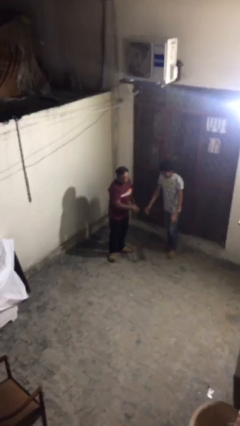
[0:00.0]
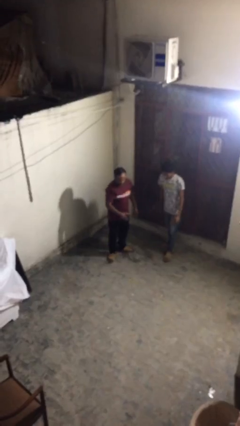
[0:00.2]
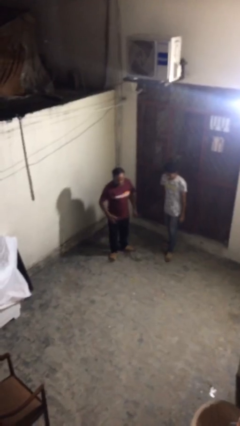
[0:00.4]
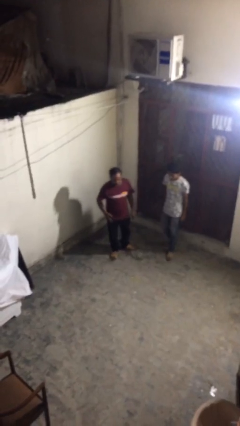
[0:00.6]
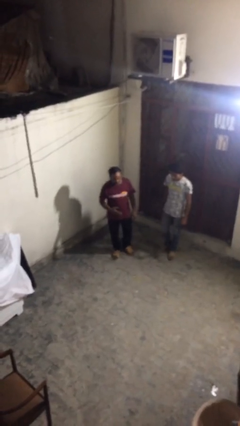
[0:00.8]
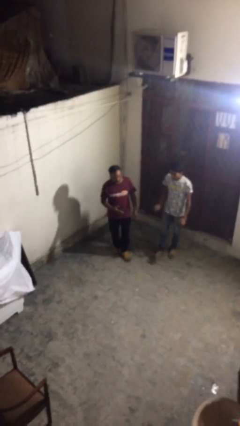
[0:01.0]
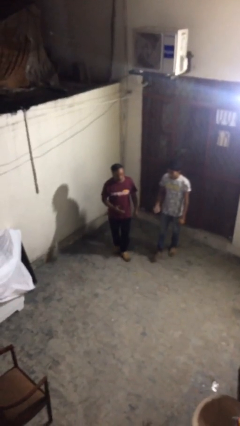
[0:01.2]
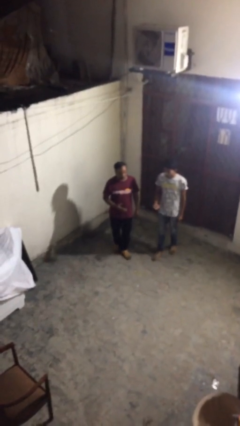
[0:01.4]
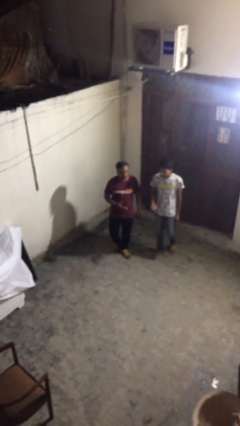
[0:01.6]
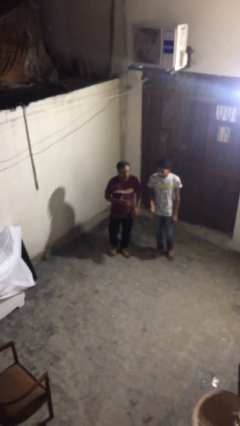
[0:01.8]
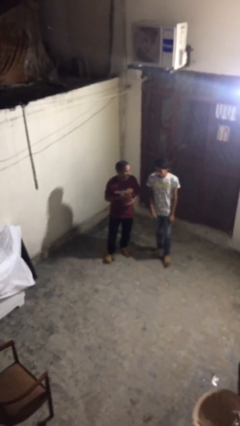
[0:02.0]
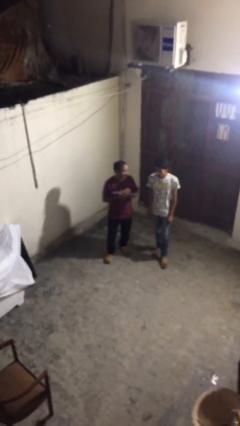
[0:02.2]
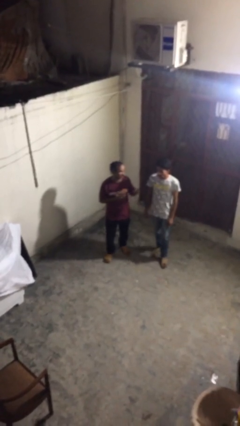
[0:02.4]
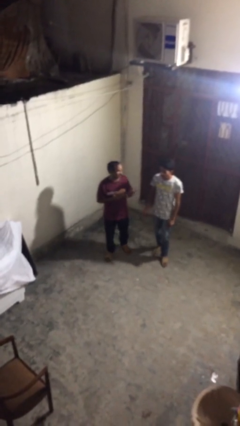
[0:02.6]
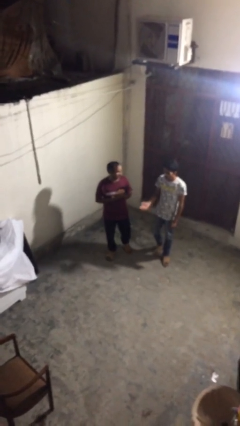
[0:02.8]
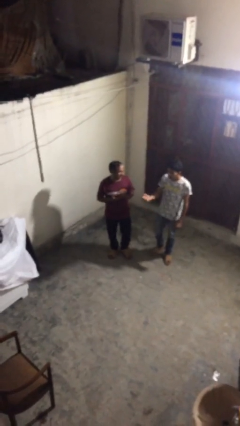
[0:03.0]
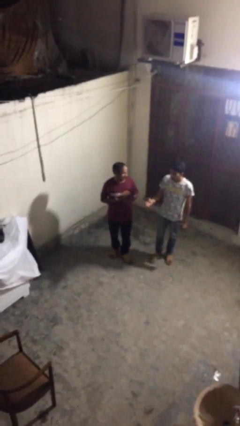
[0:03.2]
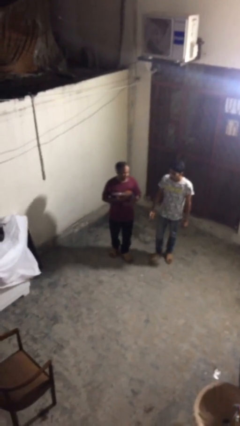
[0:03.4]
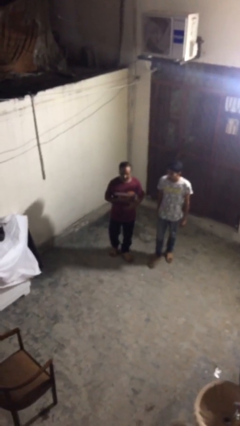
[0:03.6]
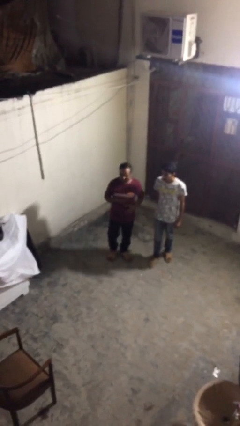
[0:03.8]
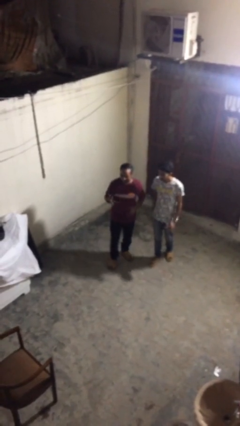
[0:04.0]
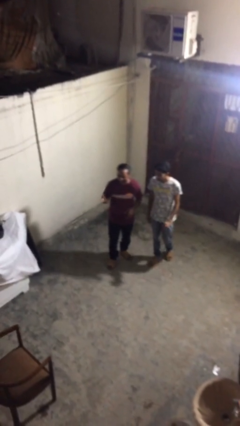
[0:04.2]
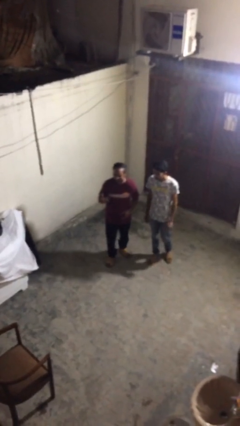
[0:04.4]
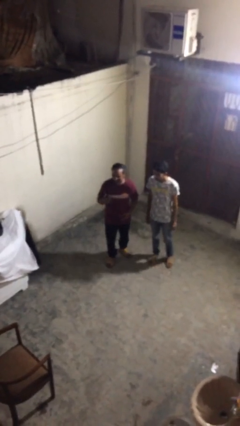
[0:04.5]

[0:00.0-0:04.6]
person talks to person

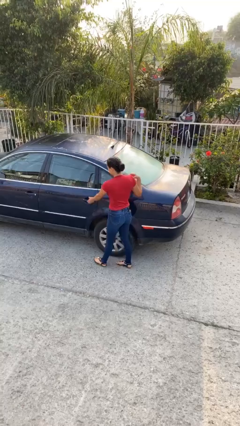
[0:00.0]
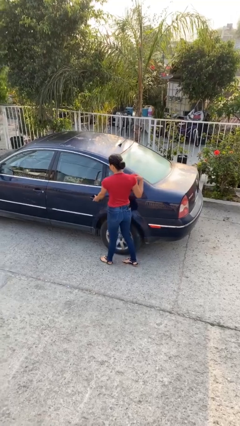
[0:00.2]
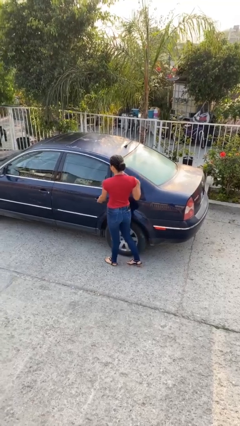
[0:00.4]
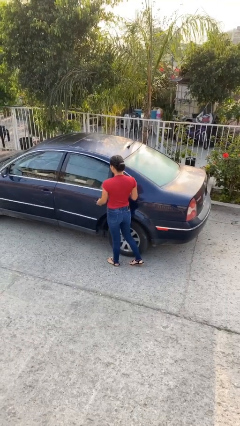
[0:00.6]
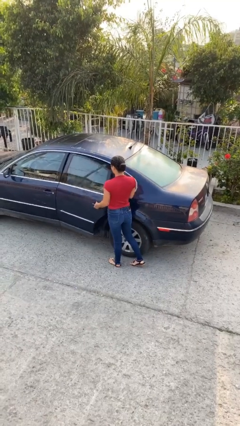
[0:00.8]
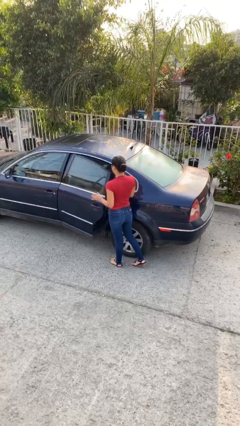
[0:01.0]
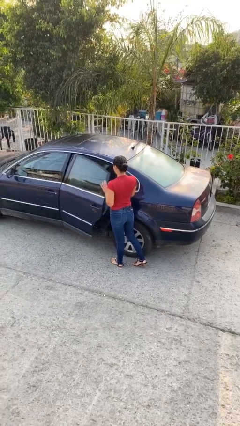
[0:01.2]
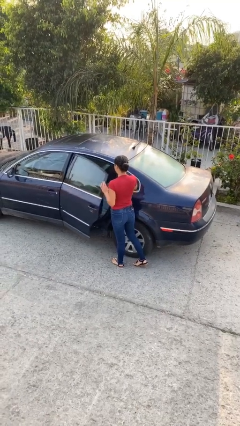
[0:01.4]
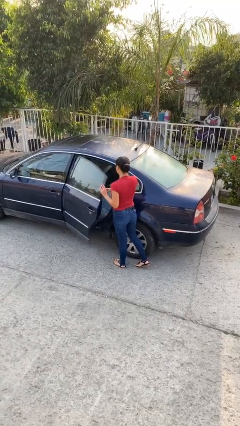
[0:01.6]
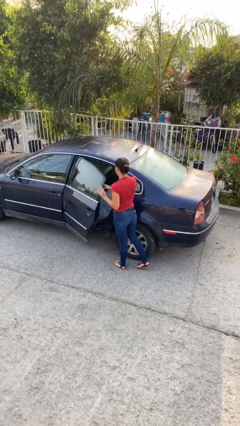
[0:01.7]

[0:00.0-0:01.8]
person opens car door

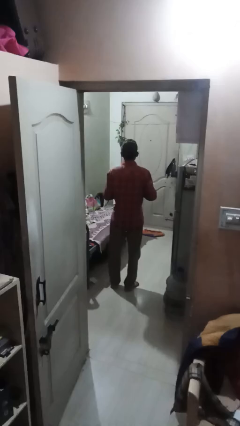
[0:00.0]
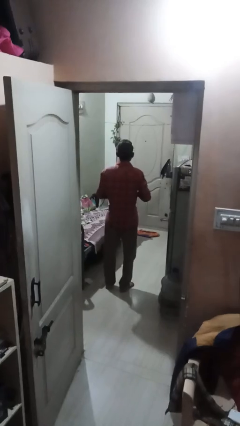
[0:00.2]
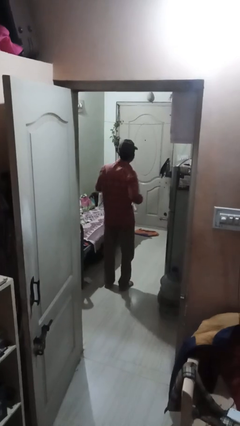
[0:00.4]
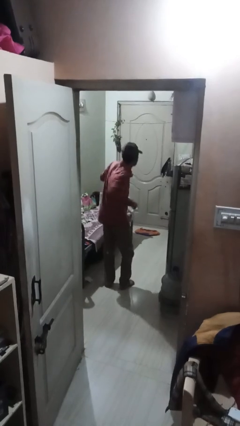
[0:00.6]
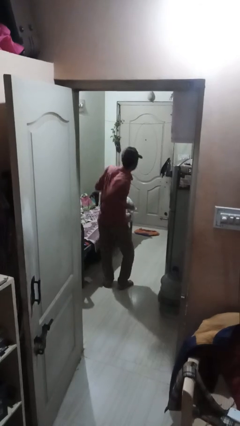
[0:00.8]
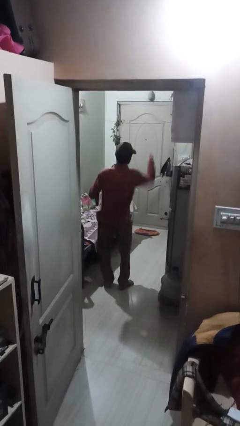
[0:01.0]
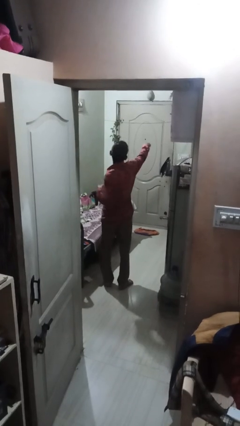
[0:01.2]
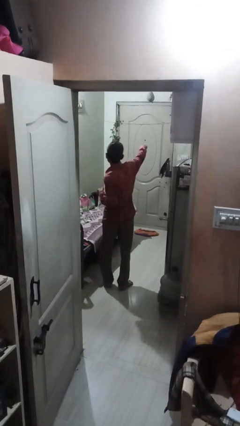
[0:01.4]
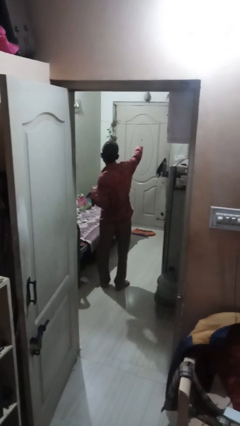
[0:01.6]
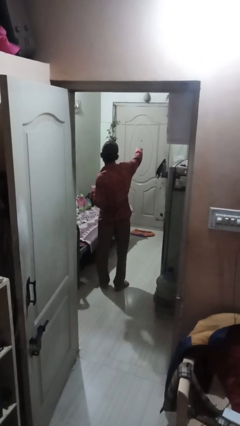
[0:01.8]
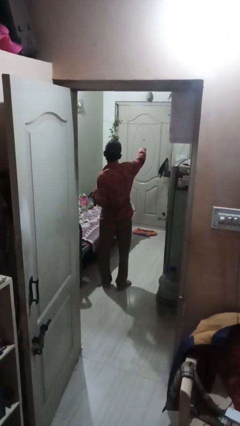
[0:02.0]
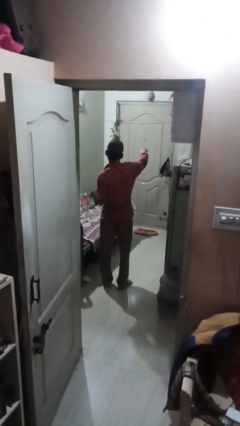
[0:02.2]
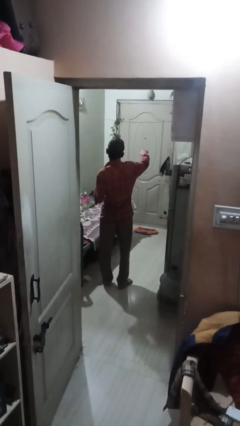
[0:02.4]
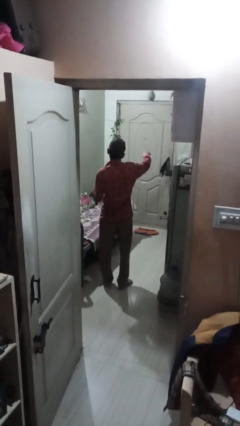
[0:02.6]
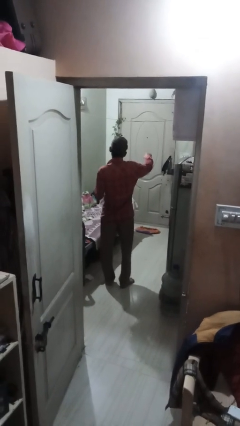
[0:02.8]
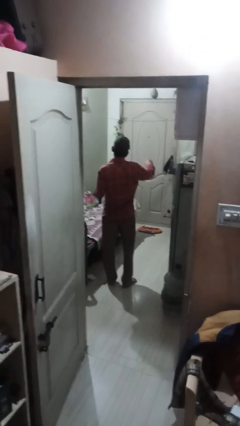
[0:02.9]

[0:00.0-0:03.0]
person punches

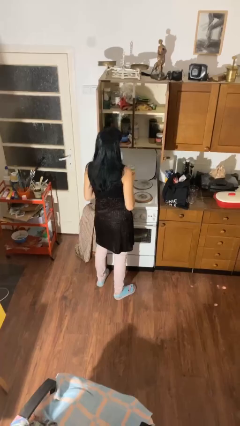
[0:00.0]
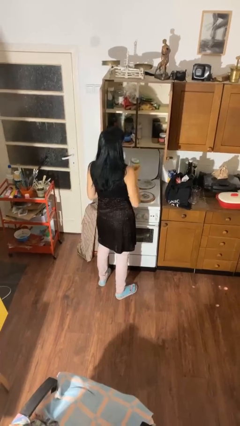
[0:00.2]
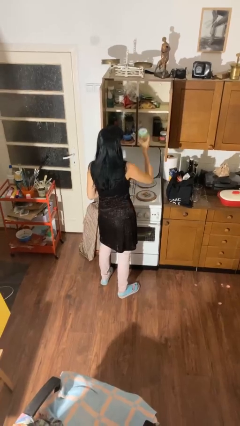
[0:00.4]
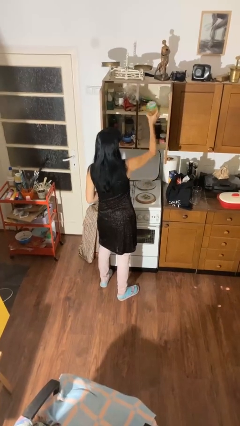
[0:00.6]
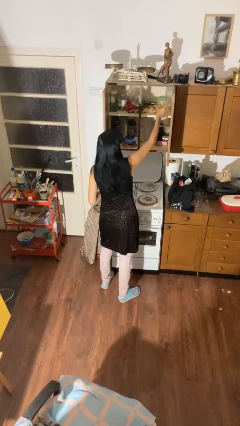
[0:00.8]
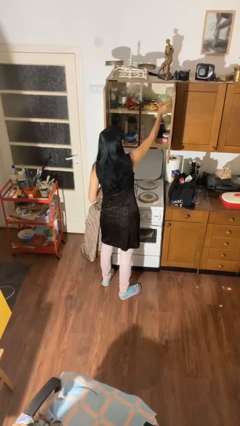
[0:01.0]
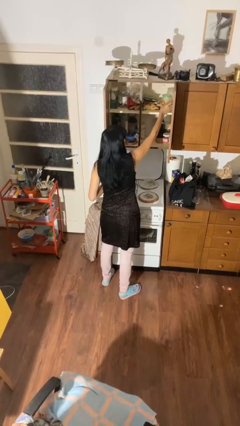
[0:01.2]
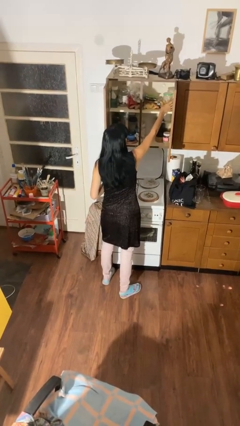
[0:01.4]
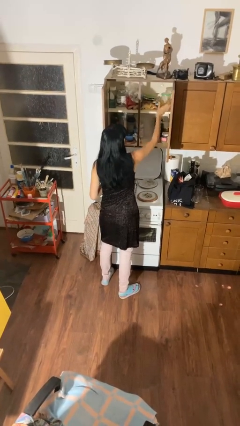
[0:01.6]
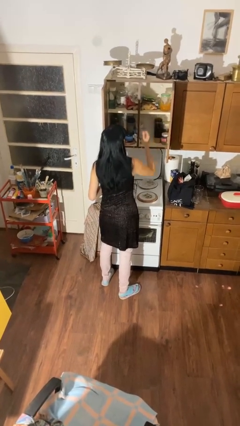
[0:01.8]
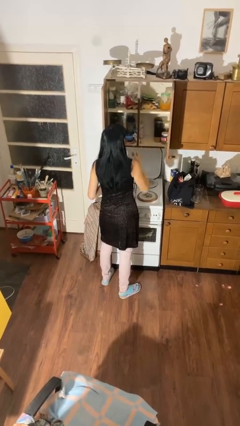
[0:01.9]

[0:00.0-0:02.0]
person puts down object into cabinet

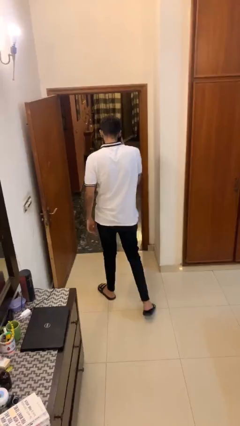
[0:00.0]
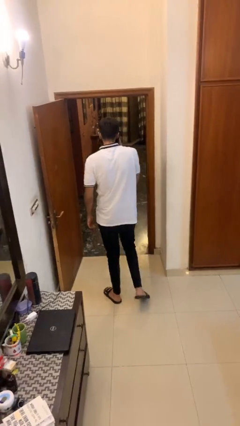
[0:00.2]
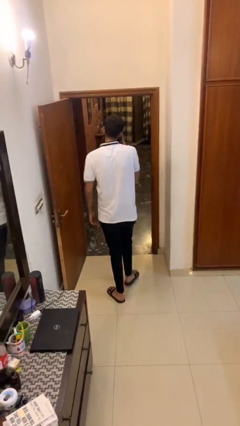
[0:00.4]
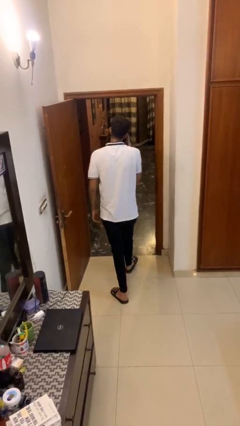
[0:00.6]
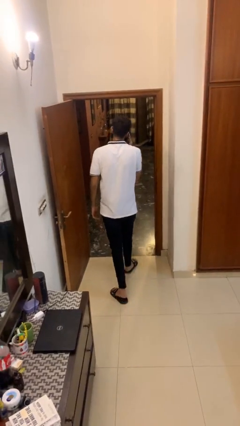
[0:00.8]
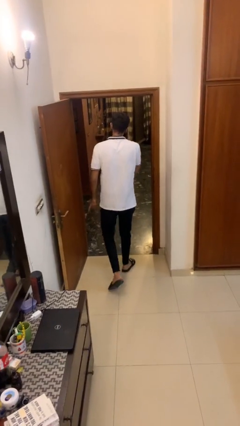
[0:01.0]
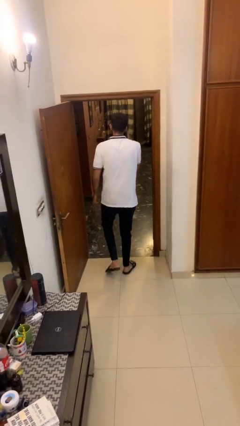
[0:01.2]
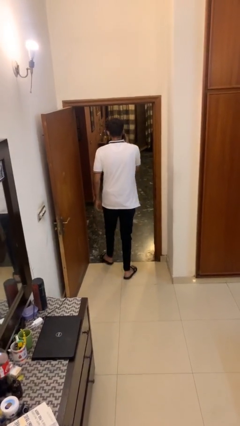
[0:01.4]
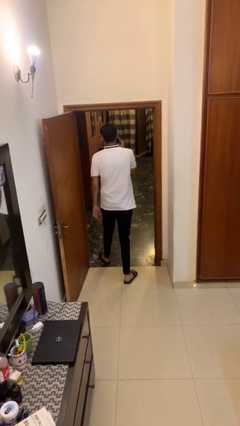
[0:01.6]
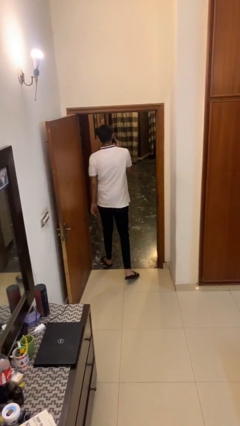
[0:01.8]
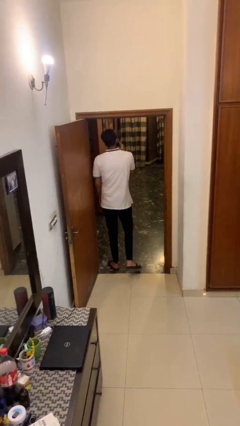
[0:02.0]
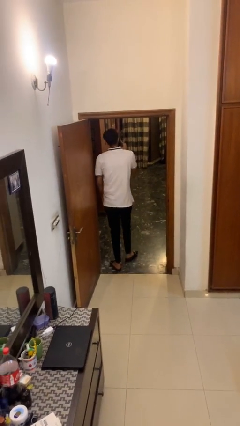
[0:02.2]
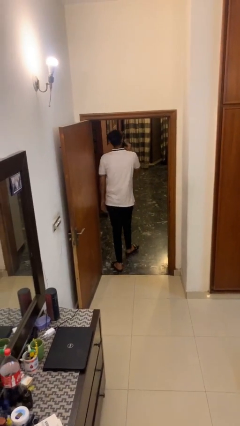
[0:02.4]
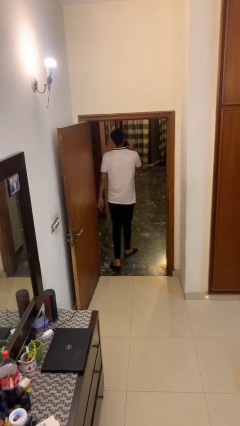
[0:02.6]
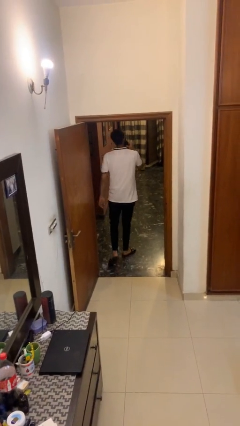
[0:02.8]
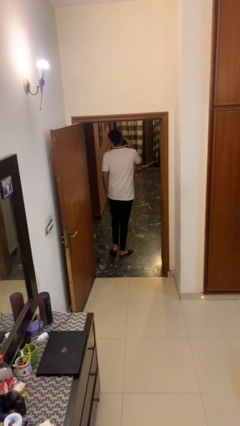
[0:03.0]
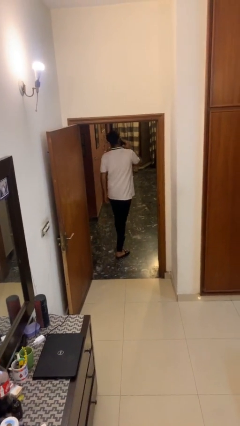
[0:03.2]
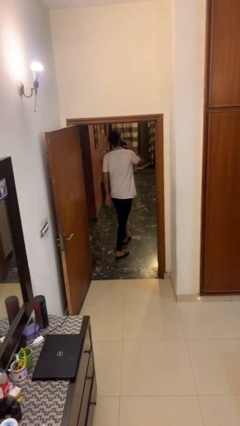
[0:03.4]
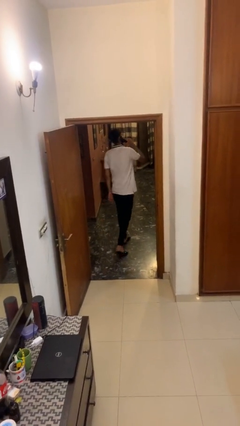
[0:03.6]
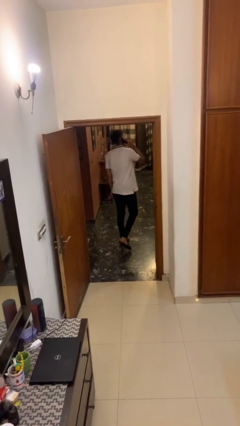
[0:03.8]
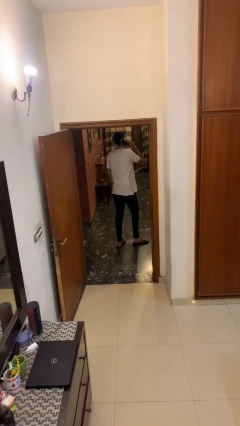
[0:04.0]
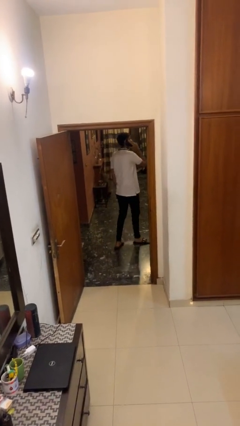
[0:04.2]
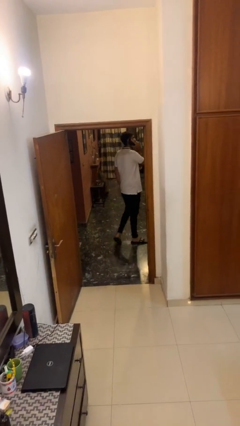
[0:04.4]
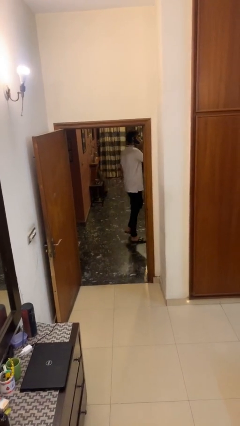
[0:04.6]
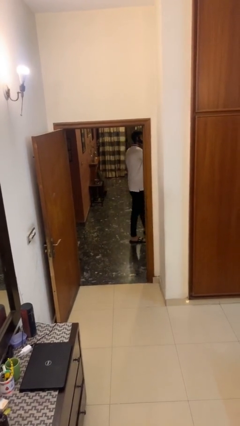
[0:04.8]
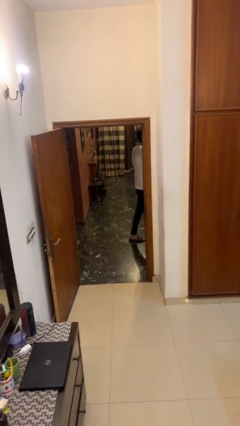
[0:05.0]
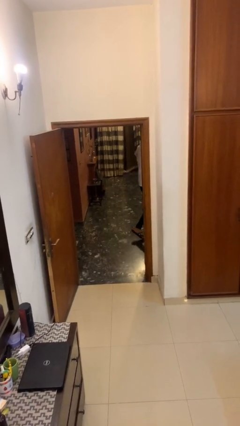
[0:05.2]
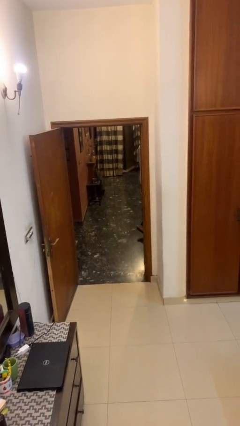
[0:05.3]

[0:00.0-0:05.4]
person exits scene through structure

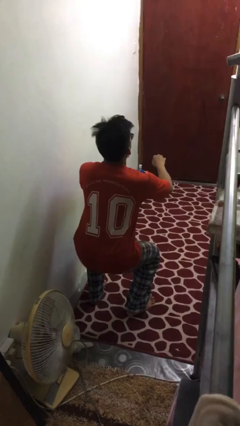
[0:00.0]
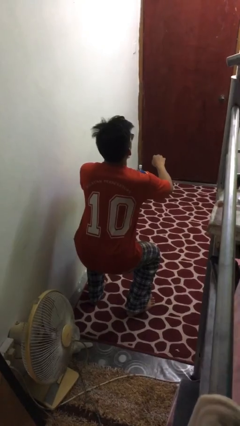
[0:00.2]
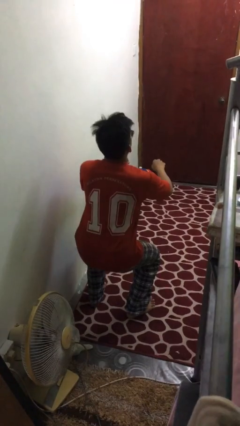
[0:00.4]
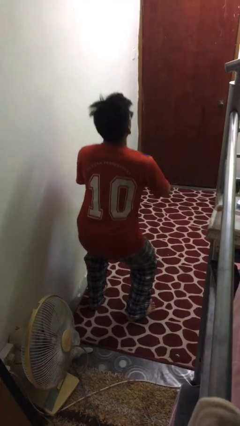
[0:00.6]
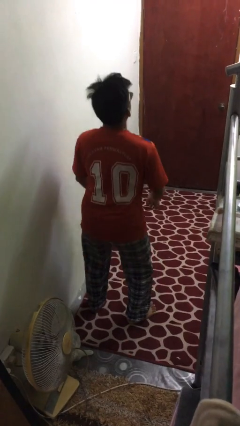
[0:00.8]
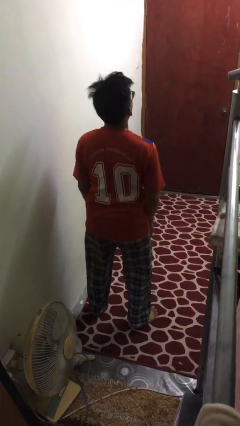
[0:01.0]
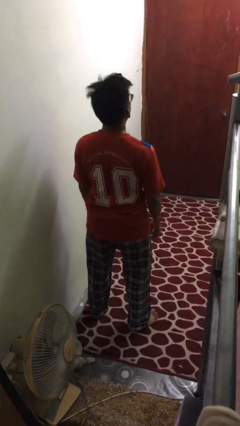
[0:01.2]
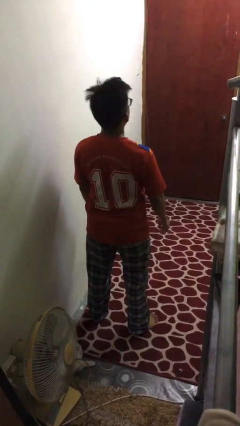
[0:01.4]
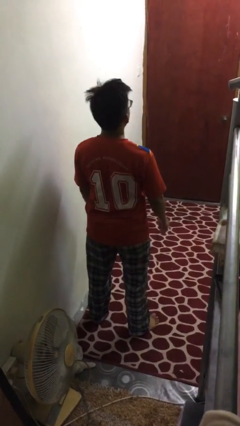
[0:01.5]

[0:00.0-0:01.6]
person stands up
